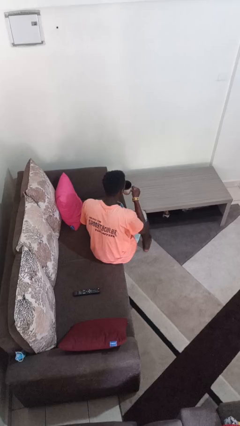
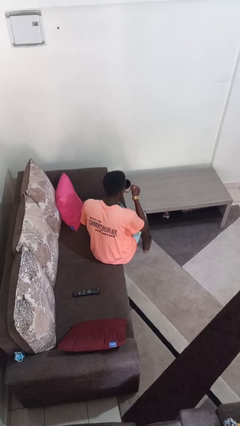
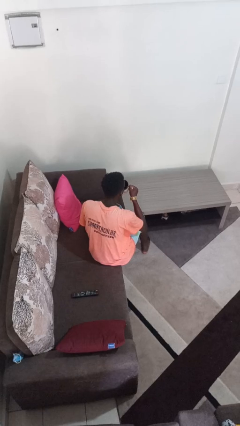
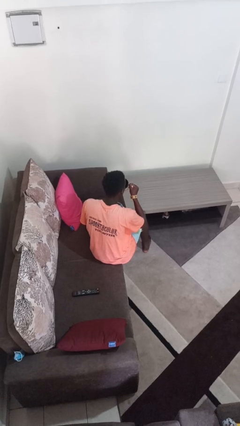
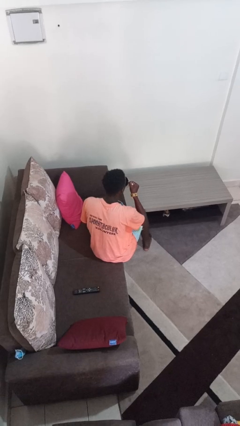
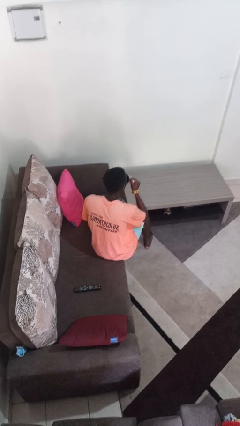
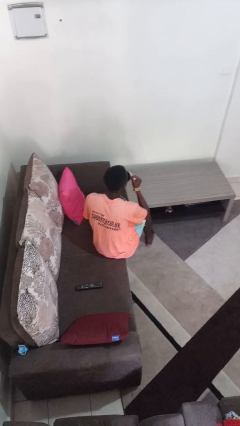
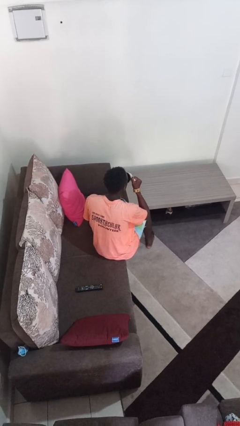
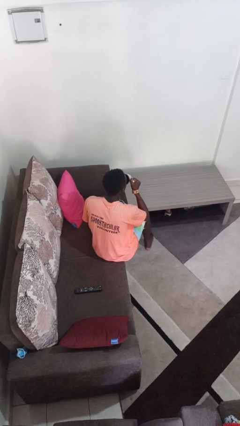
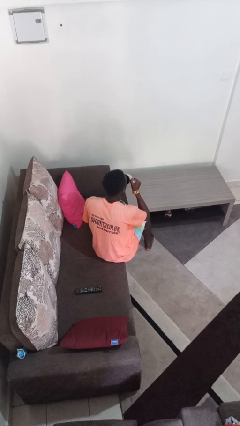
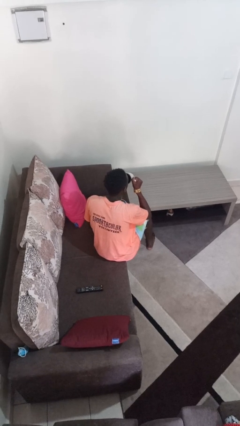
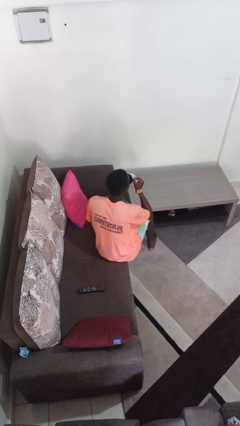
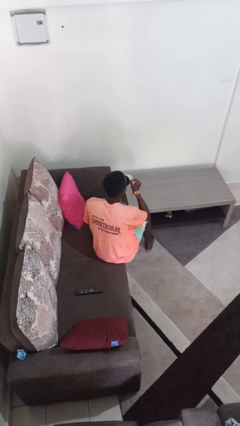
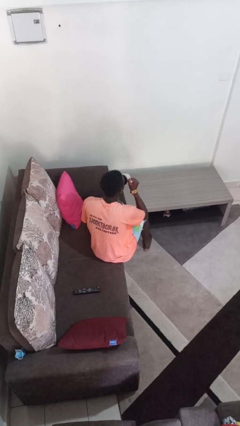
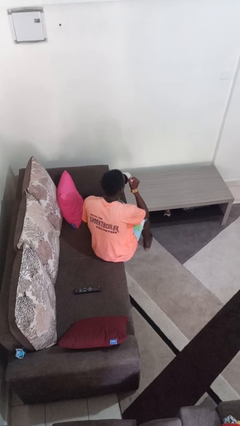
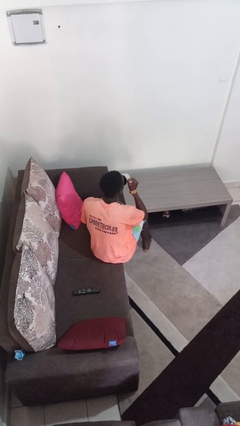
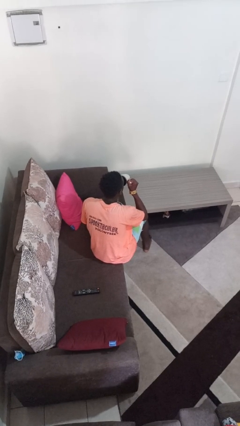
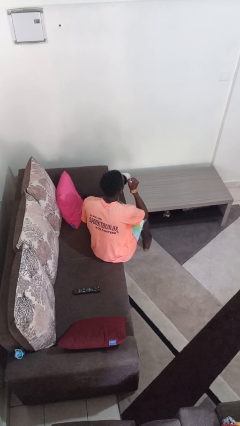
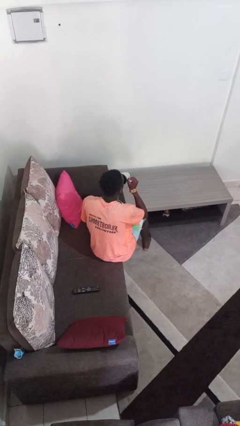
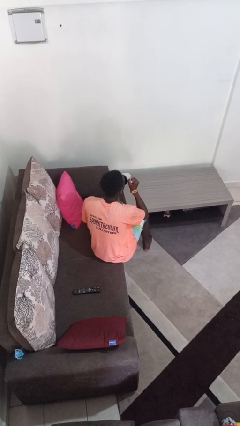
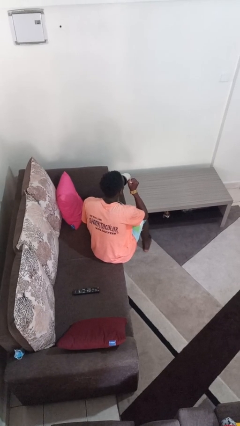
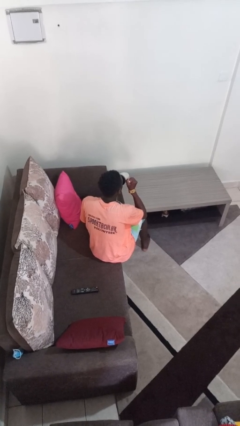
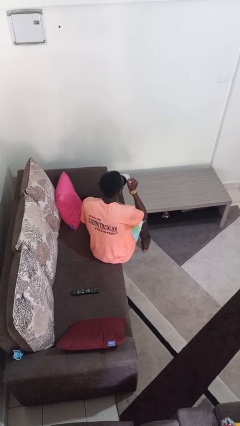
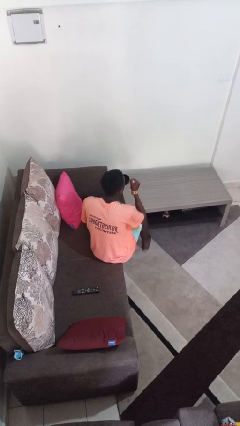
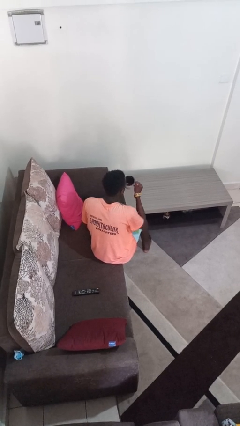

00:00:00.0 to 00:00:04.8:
person drinks from mug

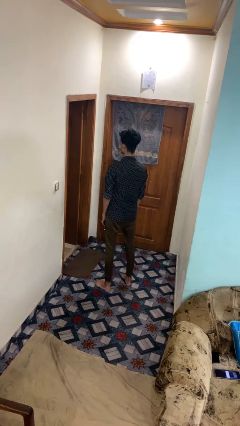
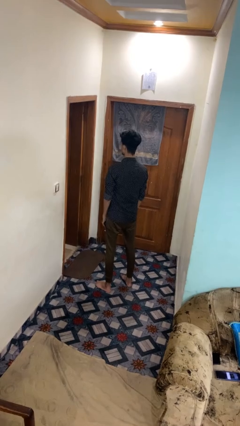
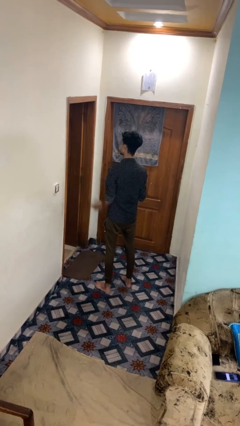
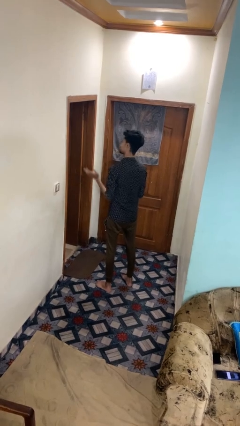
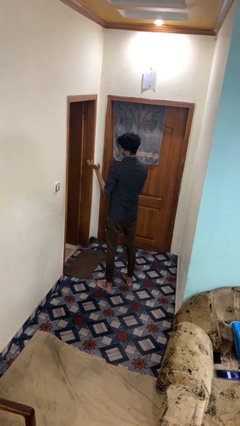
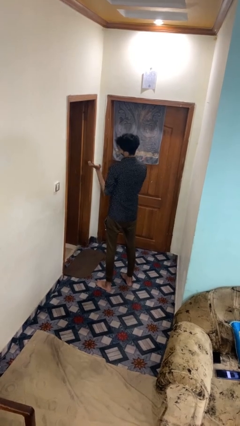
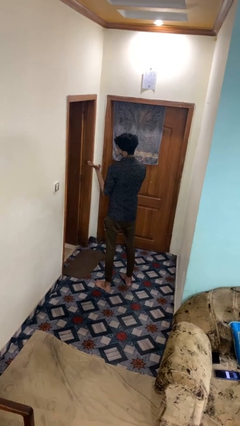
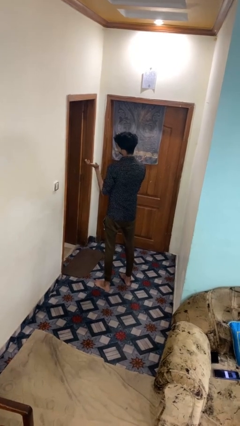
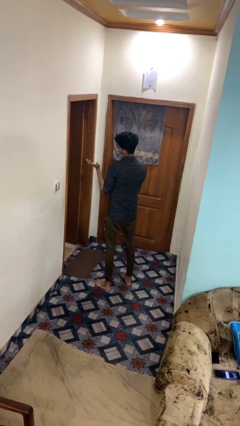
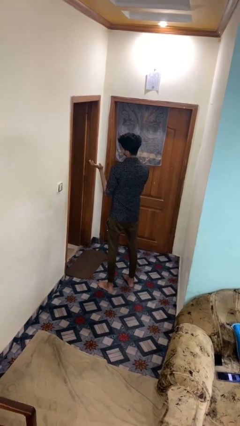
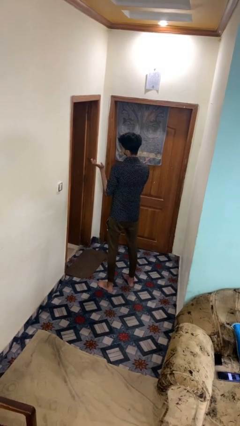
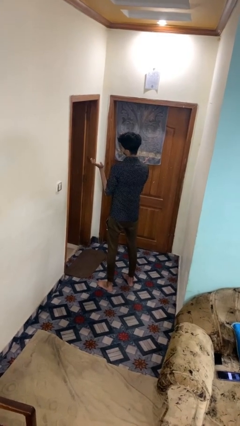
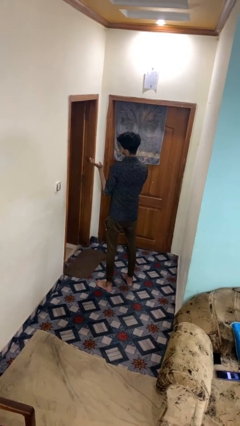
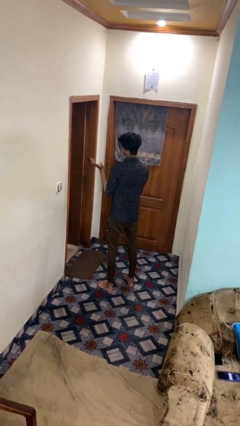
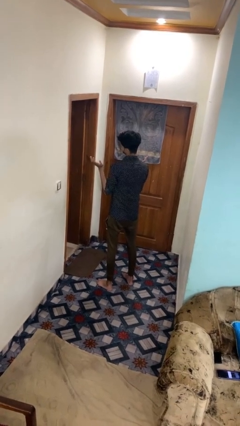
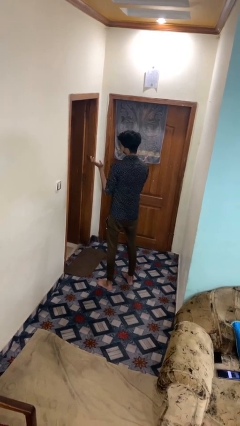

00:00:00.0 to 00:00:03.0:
person shrugs

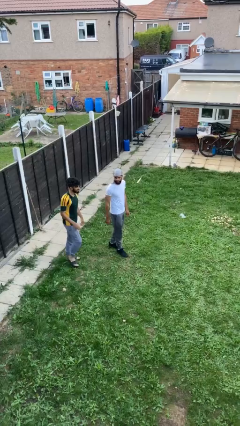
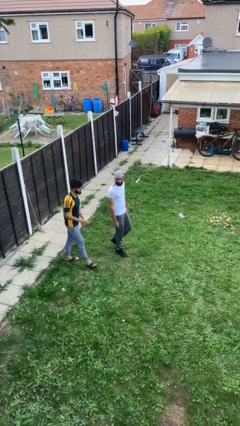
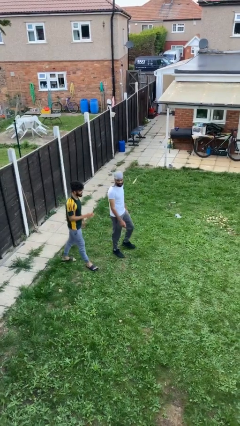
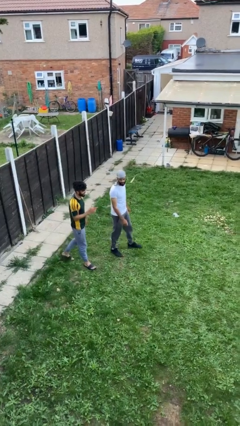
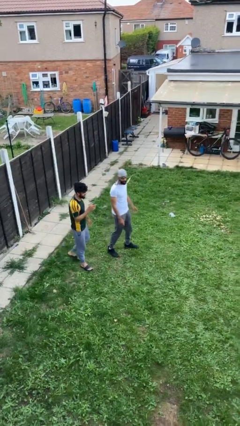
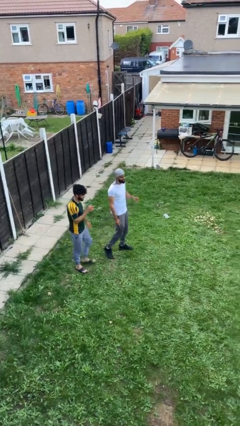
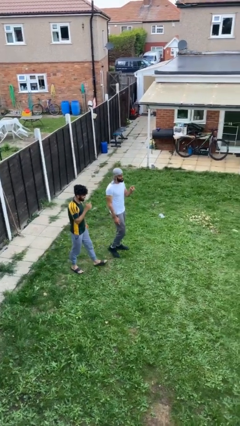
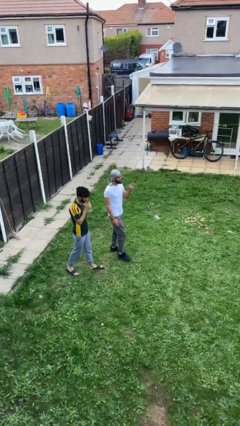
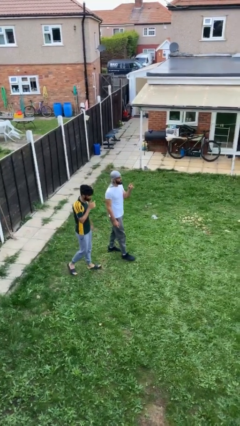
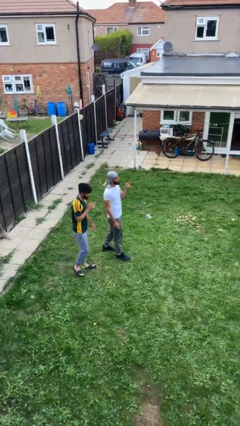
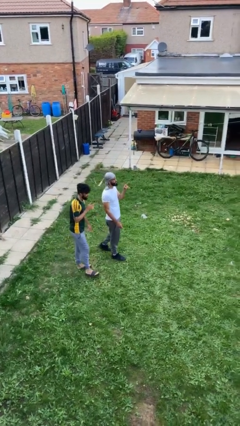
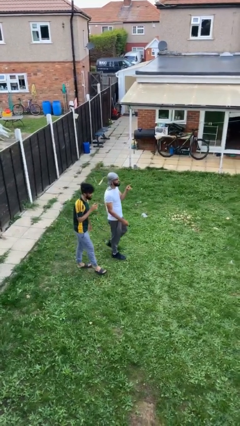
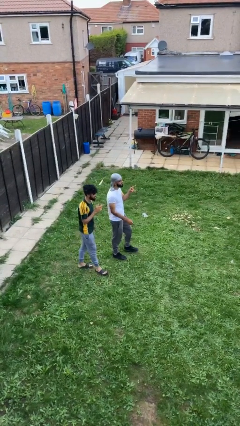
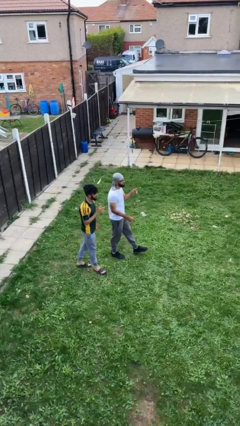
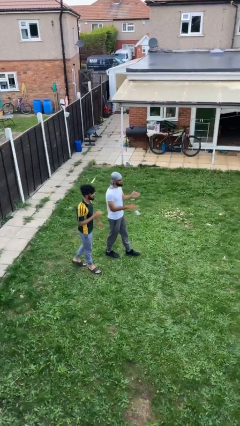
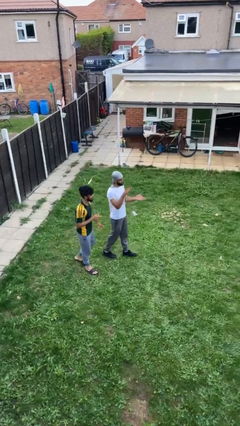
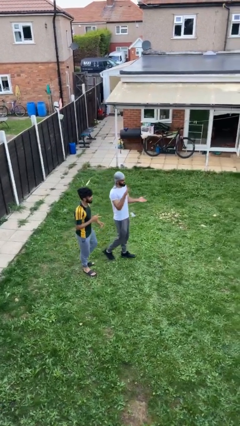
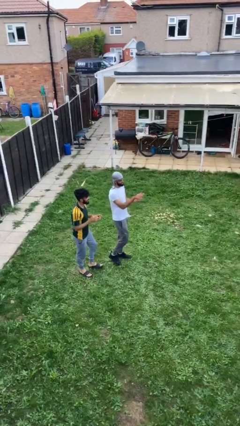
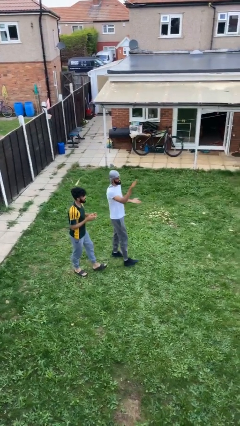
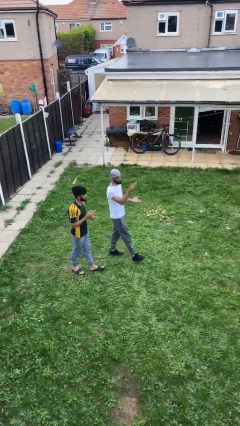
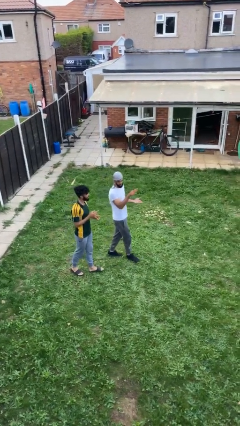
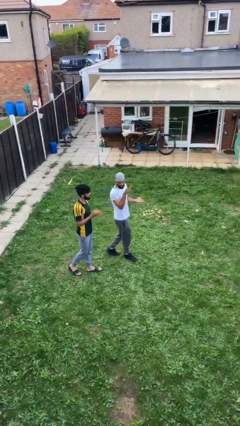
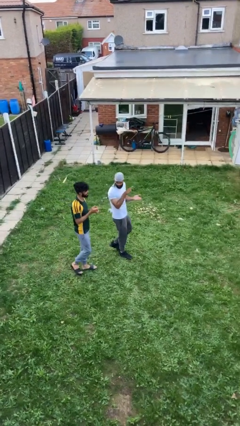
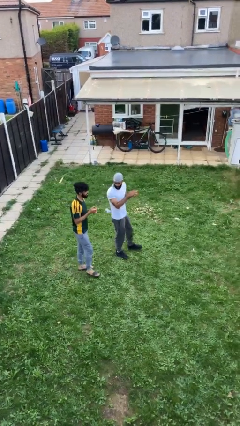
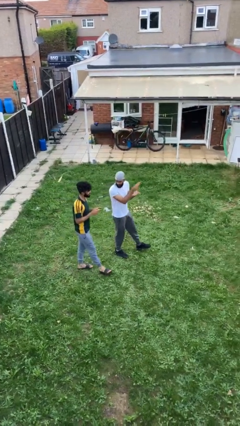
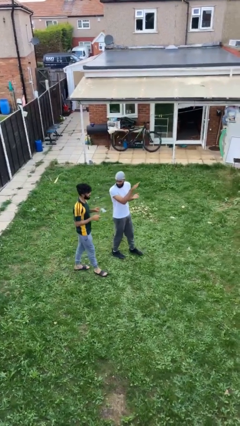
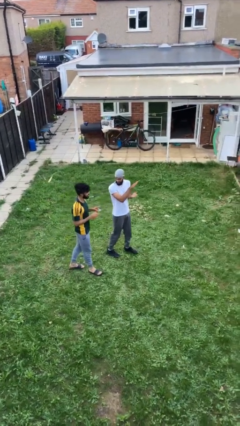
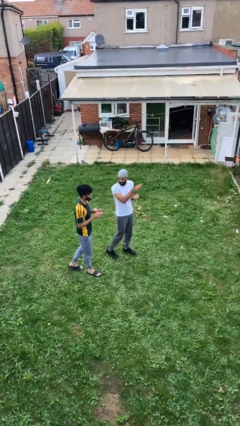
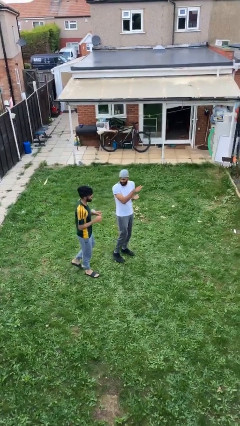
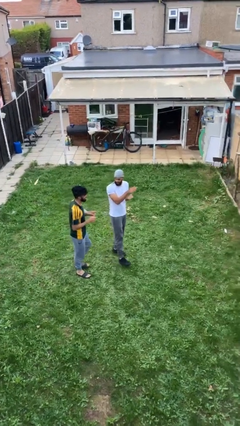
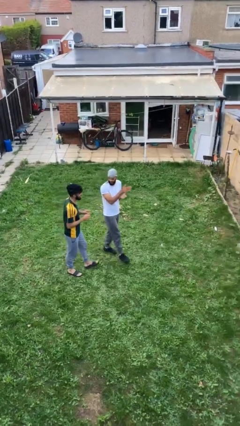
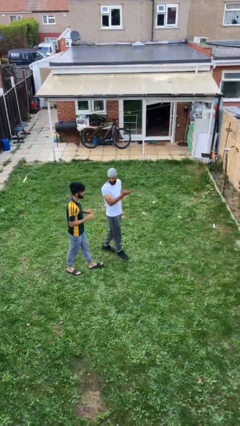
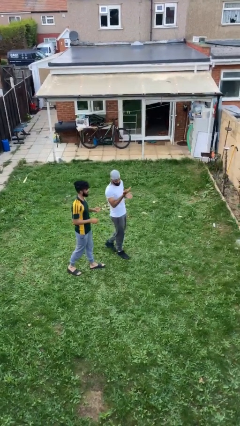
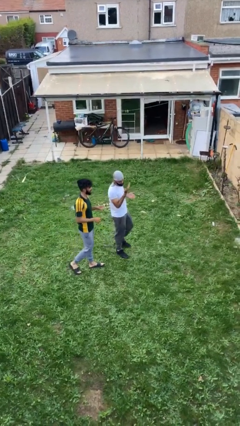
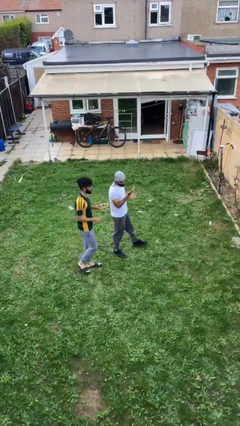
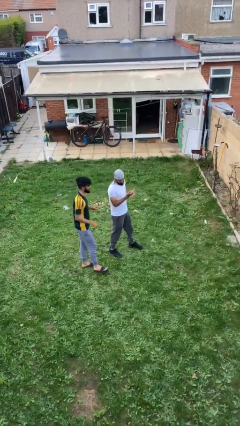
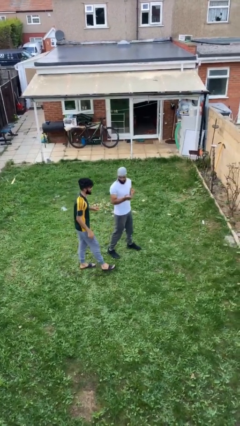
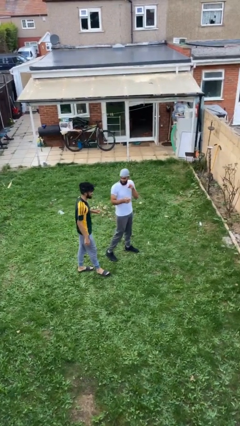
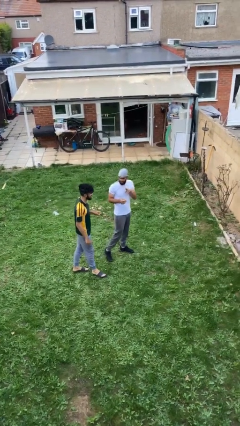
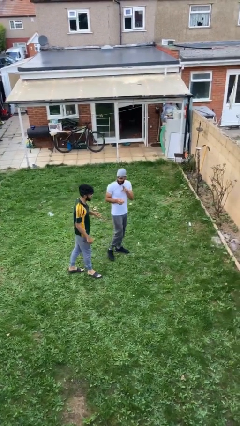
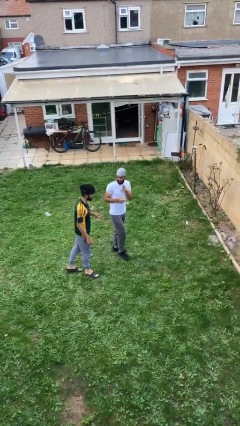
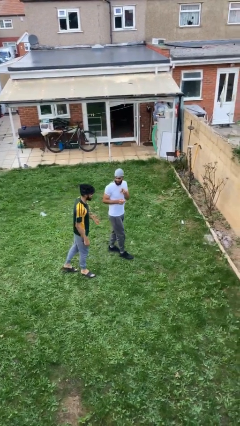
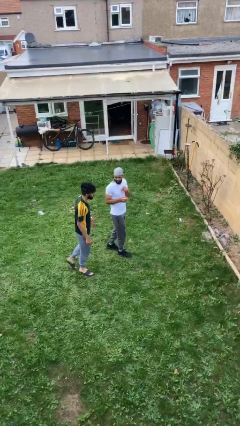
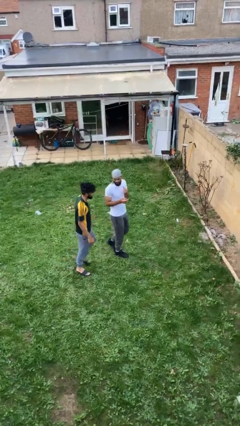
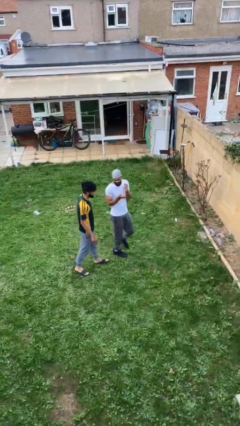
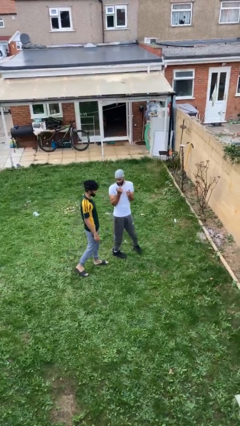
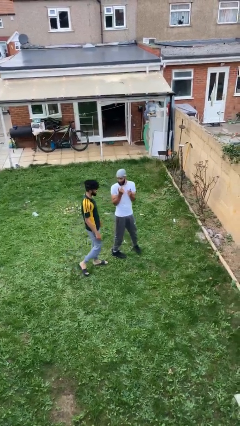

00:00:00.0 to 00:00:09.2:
person talks to person

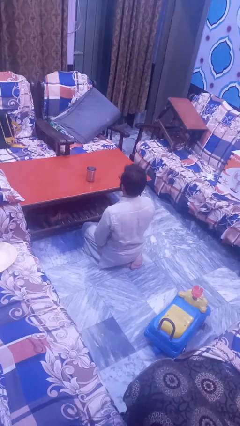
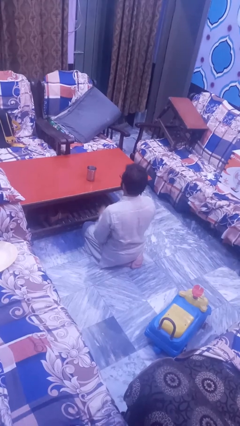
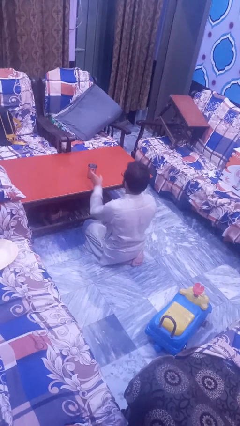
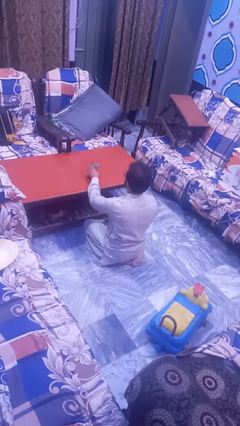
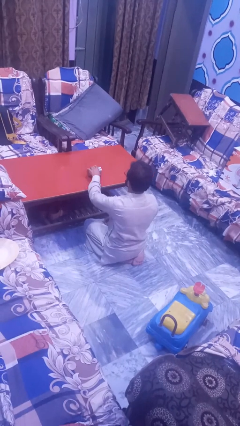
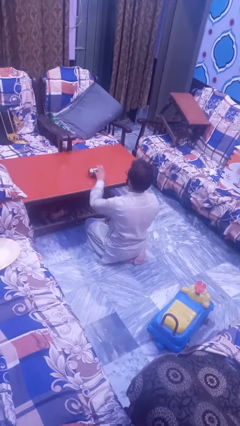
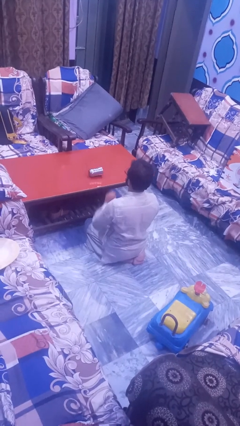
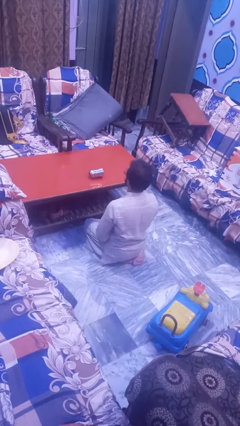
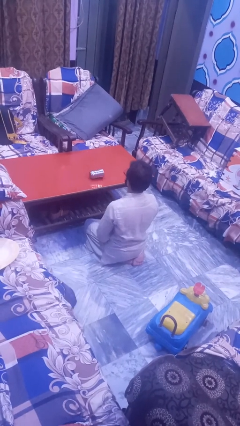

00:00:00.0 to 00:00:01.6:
person knocks over glass
